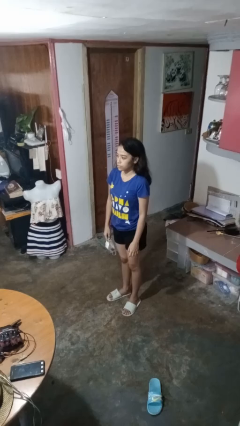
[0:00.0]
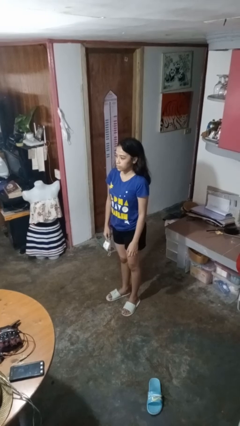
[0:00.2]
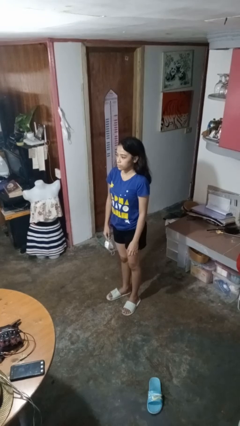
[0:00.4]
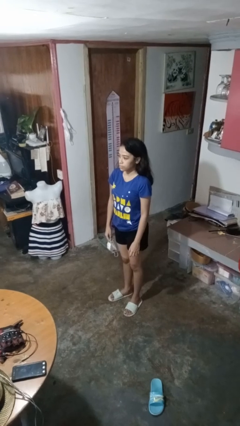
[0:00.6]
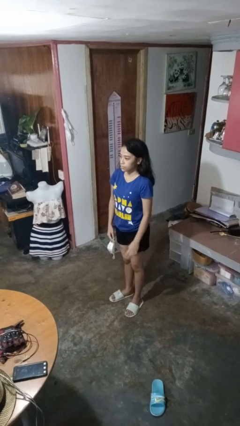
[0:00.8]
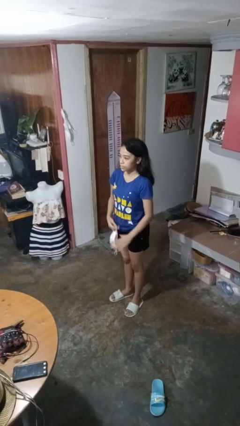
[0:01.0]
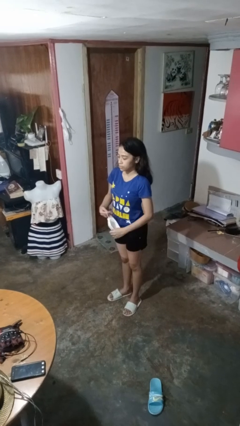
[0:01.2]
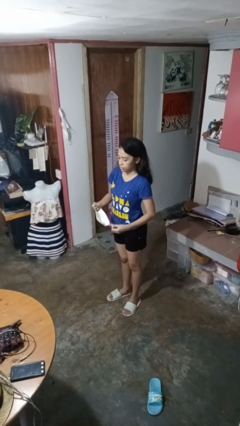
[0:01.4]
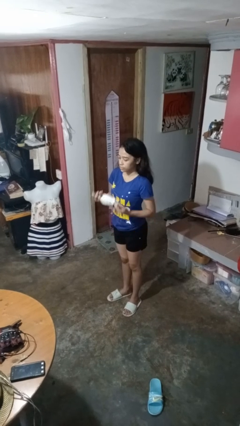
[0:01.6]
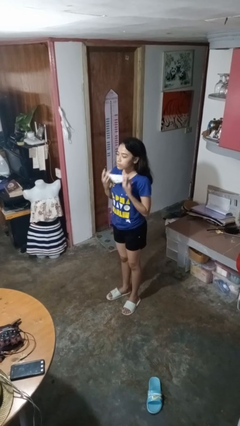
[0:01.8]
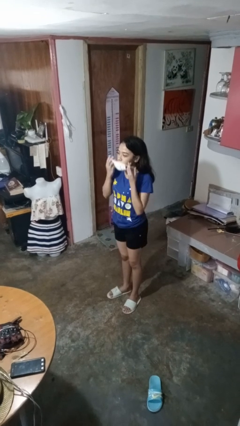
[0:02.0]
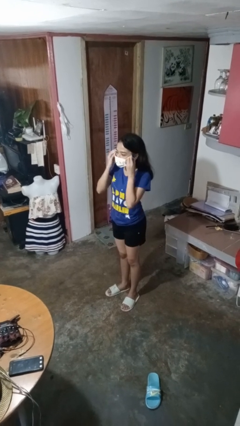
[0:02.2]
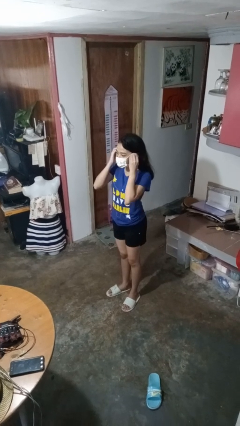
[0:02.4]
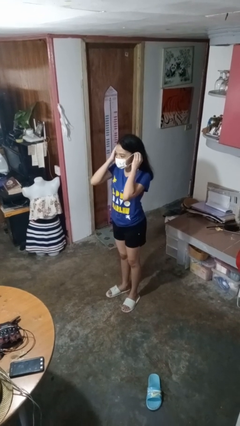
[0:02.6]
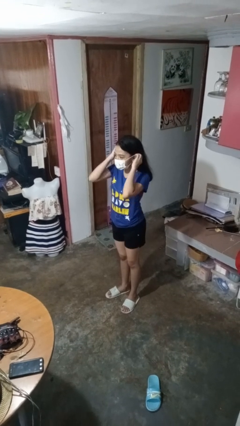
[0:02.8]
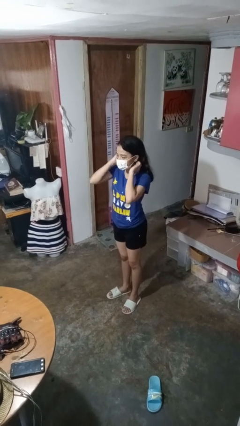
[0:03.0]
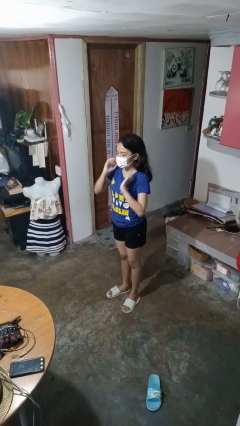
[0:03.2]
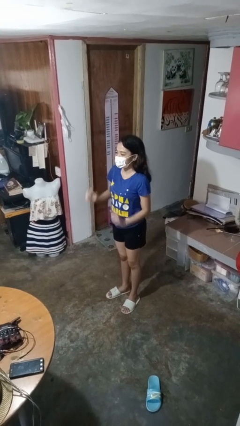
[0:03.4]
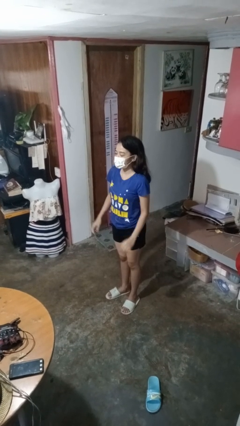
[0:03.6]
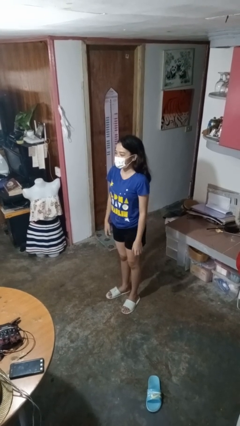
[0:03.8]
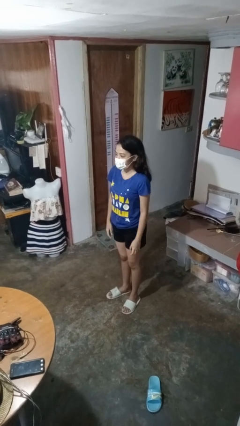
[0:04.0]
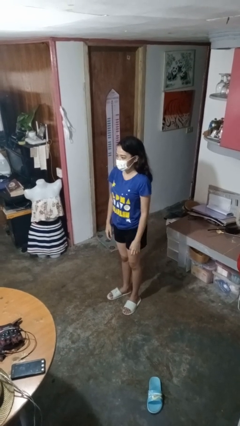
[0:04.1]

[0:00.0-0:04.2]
person puts on facemask

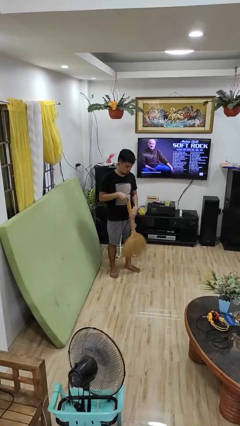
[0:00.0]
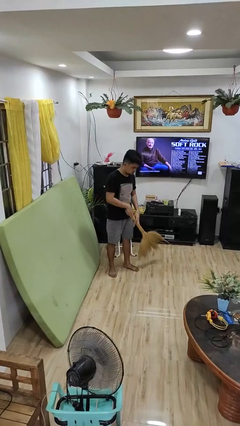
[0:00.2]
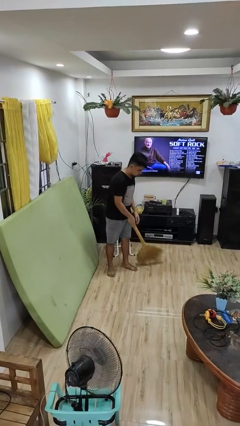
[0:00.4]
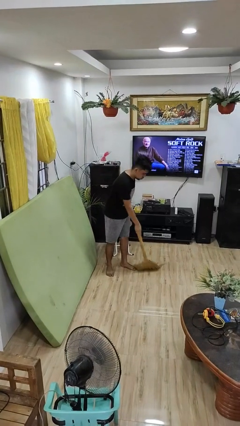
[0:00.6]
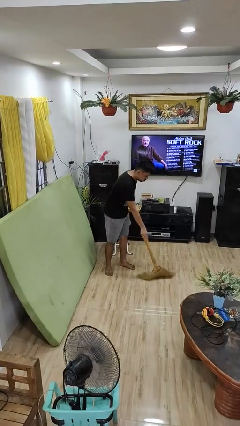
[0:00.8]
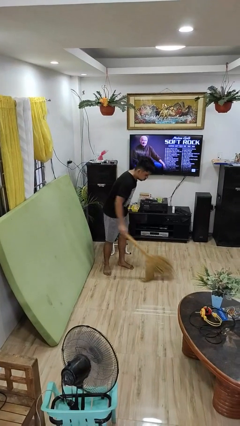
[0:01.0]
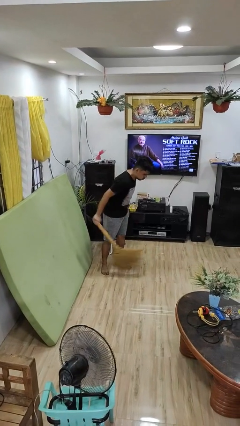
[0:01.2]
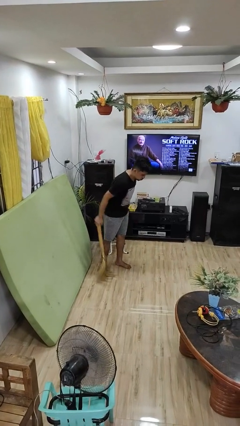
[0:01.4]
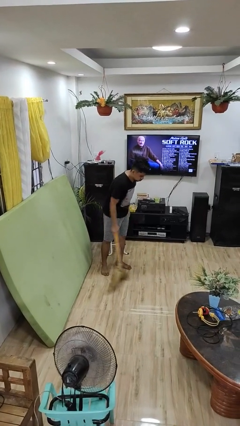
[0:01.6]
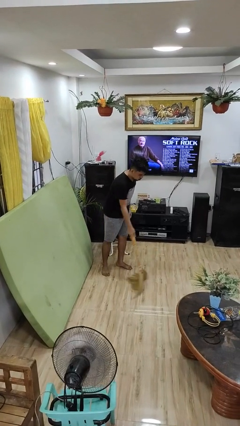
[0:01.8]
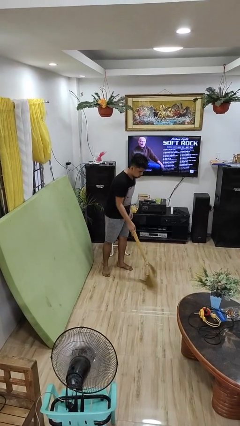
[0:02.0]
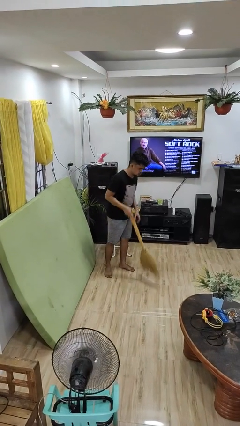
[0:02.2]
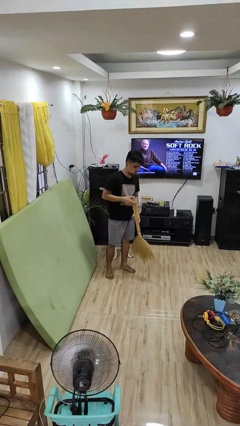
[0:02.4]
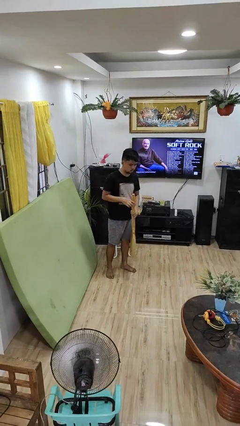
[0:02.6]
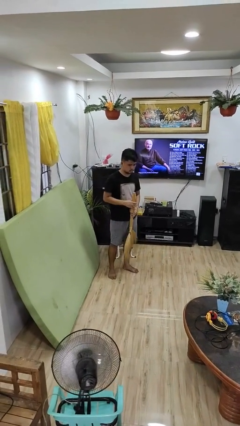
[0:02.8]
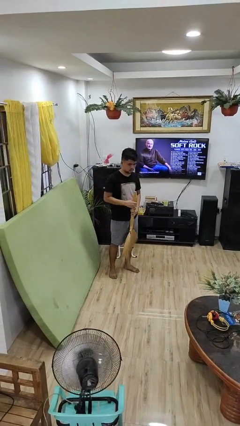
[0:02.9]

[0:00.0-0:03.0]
person sweeps floor

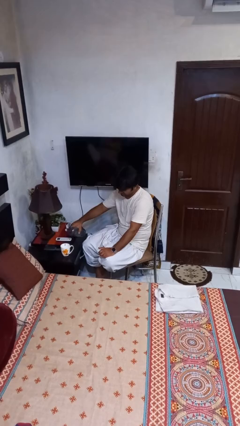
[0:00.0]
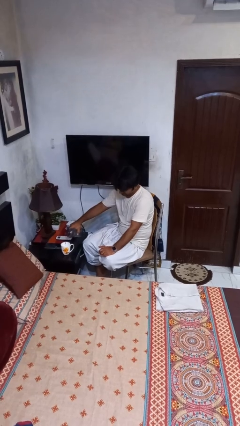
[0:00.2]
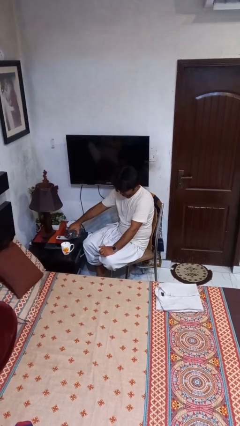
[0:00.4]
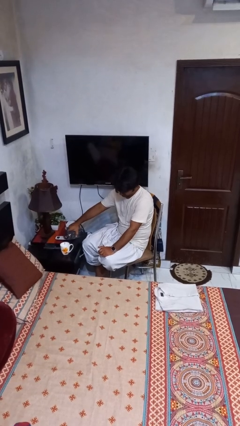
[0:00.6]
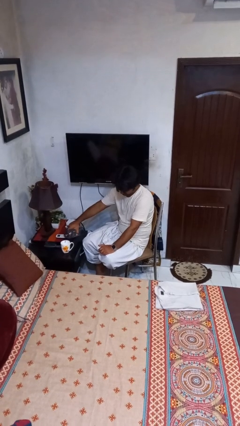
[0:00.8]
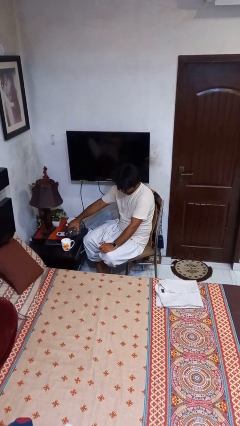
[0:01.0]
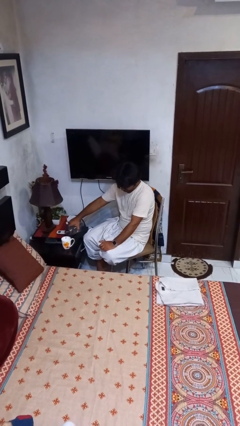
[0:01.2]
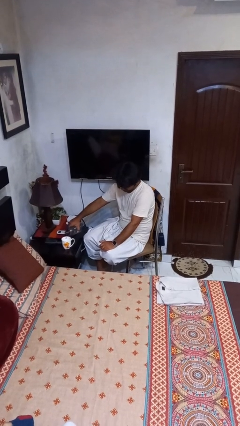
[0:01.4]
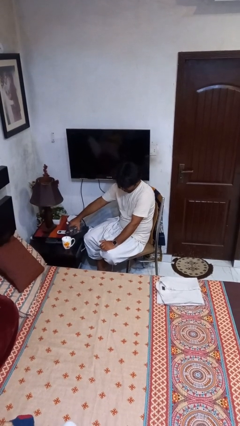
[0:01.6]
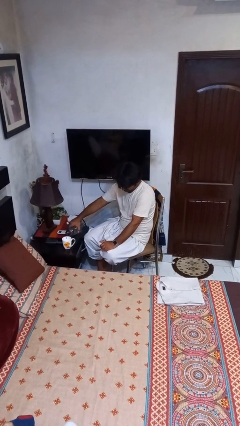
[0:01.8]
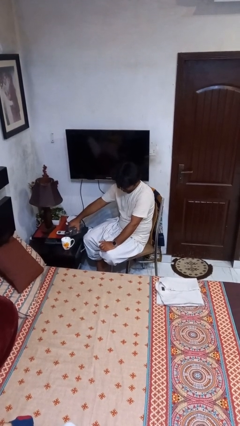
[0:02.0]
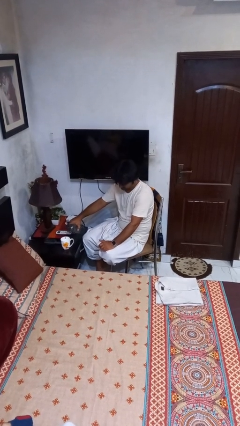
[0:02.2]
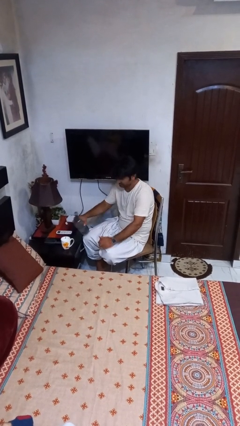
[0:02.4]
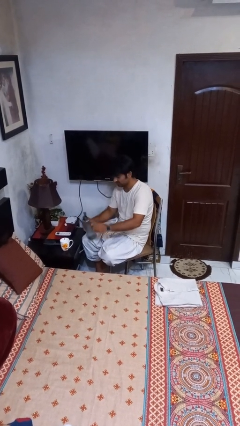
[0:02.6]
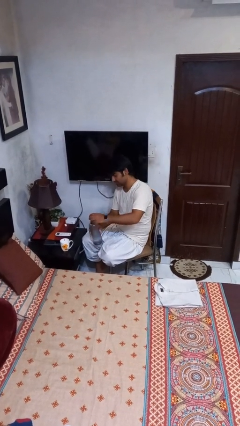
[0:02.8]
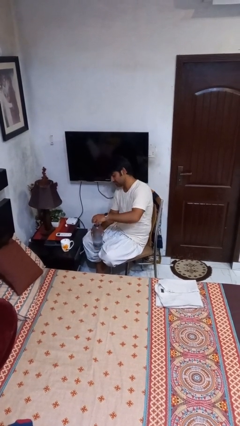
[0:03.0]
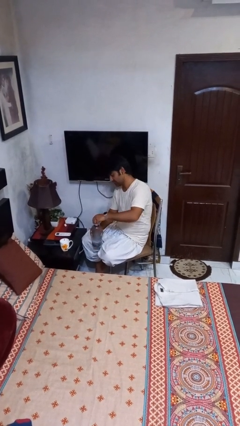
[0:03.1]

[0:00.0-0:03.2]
person pours liquid into cup

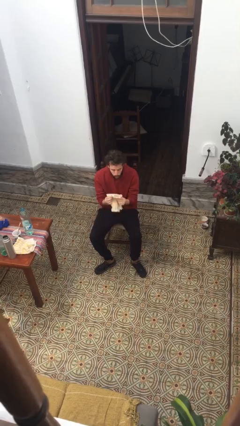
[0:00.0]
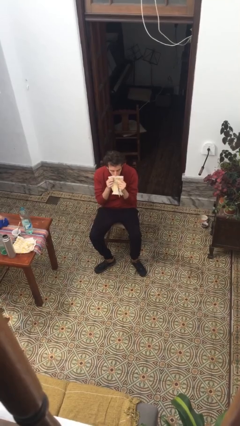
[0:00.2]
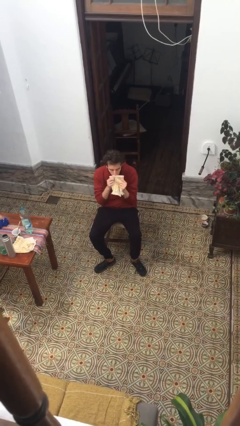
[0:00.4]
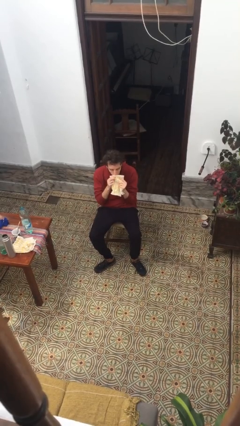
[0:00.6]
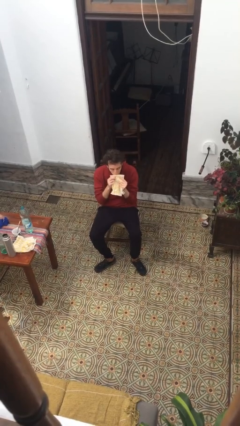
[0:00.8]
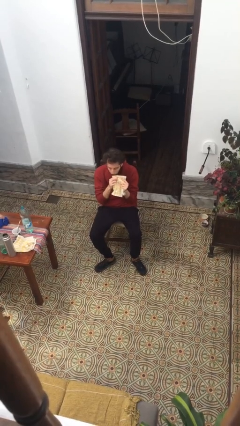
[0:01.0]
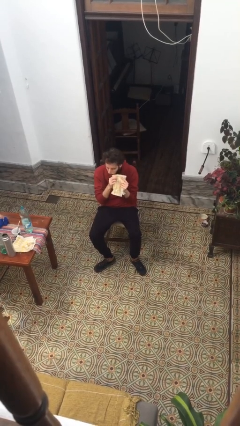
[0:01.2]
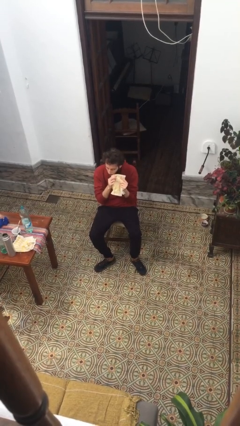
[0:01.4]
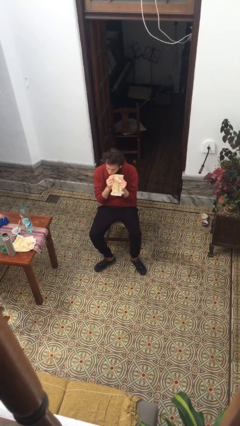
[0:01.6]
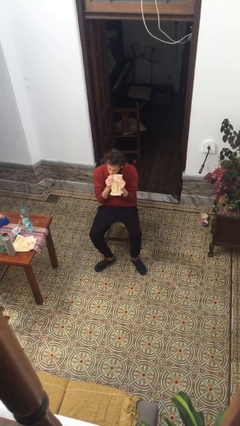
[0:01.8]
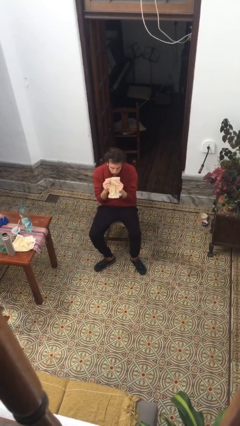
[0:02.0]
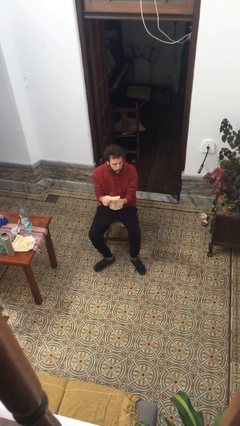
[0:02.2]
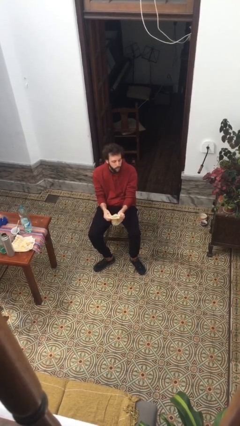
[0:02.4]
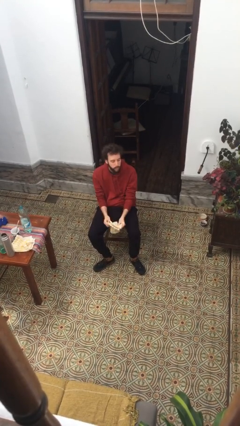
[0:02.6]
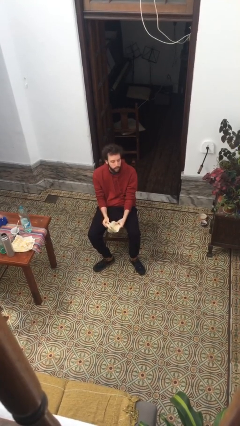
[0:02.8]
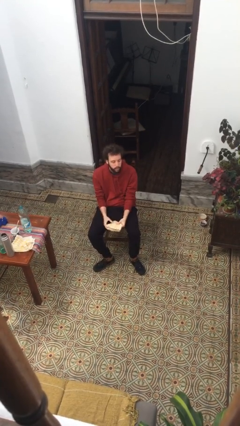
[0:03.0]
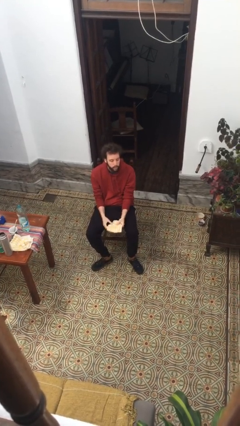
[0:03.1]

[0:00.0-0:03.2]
person wipes mouth with napkin

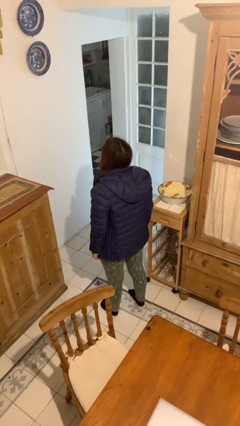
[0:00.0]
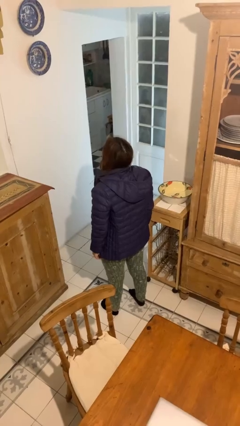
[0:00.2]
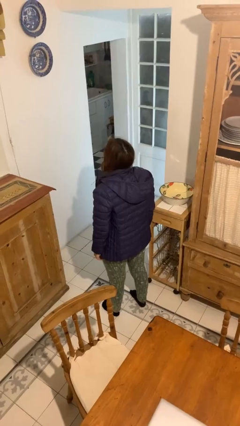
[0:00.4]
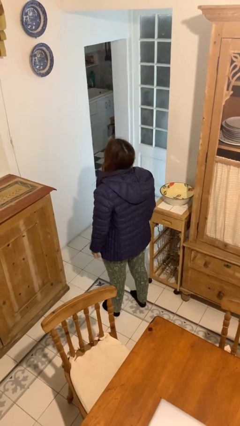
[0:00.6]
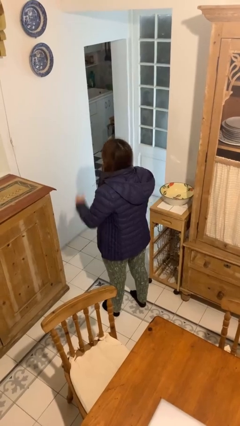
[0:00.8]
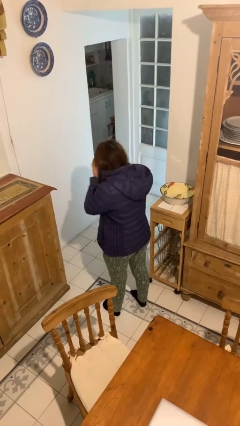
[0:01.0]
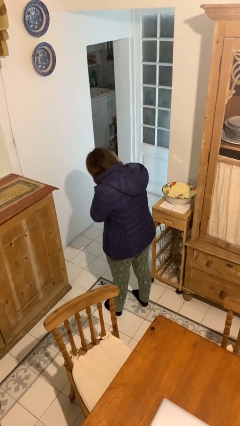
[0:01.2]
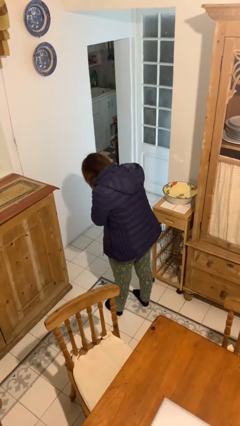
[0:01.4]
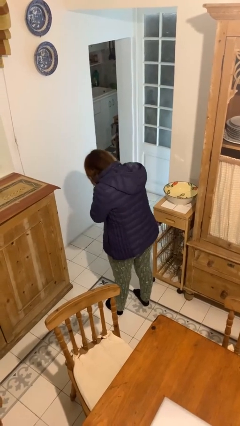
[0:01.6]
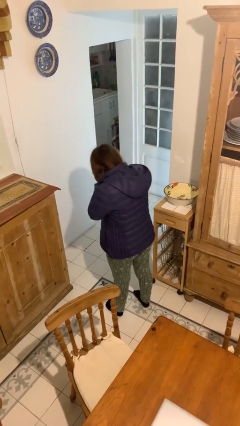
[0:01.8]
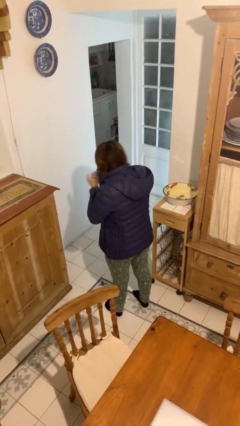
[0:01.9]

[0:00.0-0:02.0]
person sneezes into hand

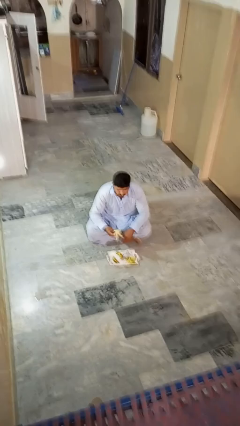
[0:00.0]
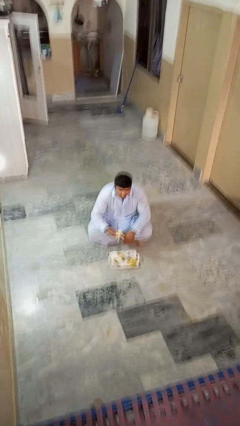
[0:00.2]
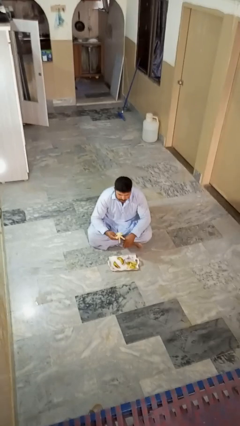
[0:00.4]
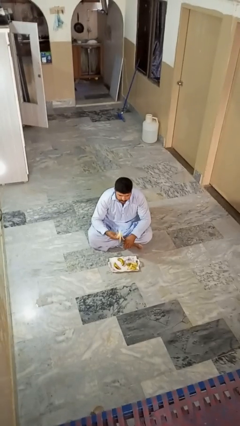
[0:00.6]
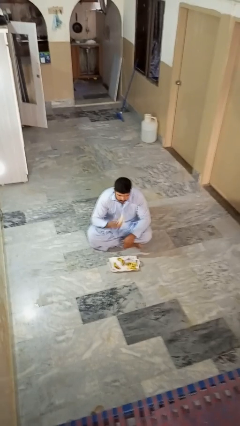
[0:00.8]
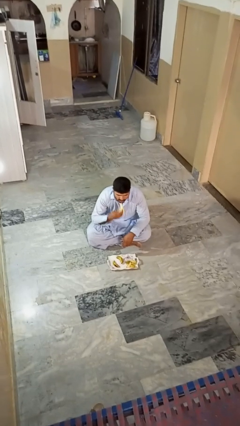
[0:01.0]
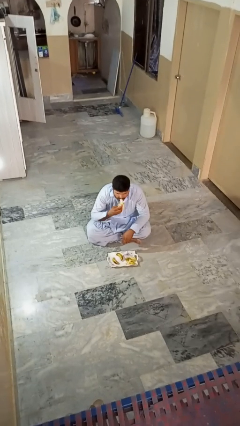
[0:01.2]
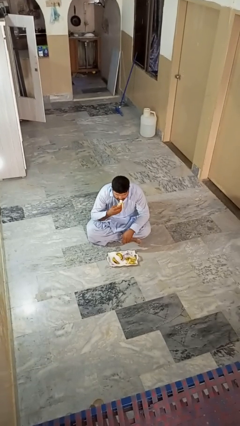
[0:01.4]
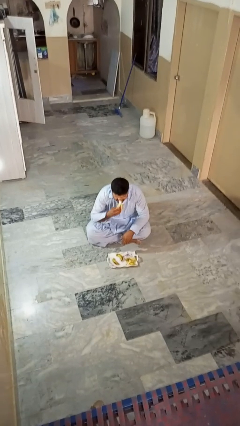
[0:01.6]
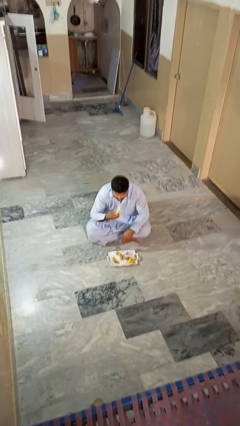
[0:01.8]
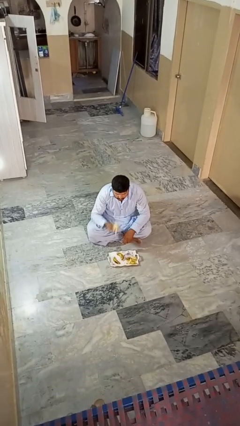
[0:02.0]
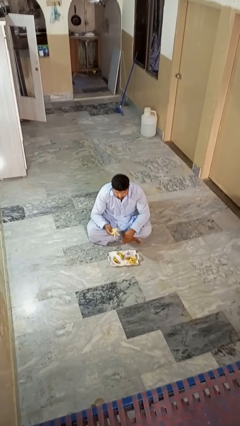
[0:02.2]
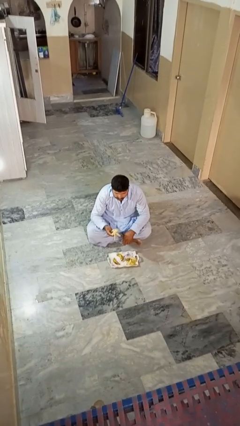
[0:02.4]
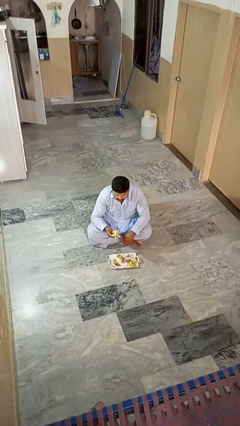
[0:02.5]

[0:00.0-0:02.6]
person eats banana
